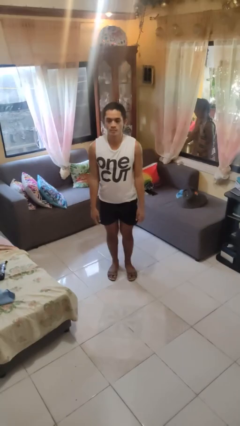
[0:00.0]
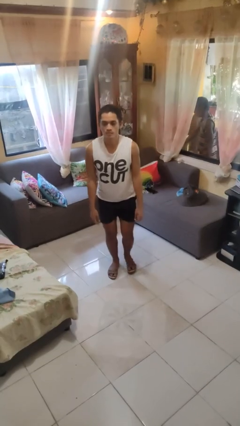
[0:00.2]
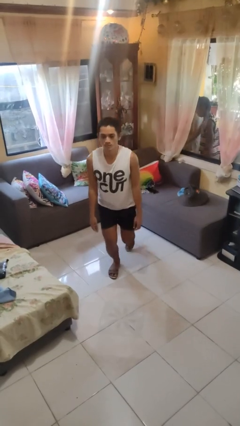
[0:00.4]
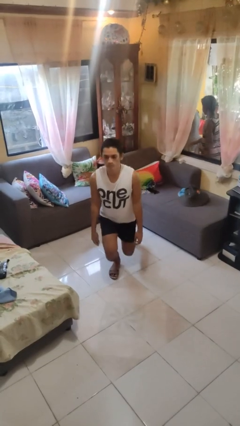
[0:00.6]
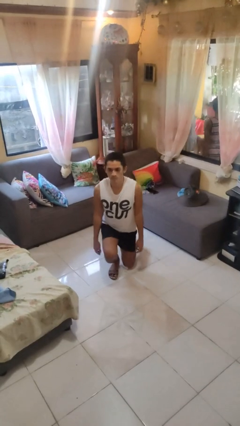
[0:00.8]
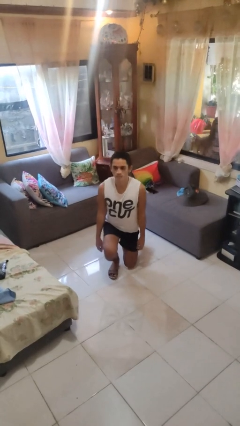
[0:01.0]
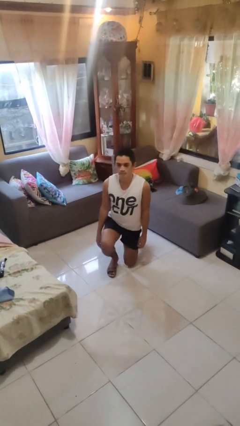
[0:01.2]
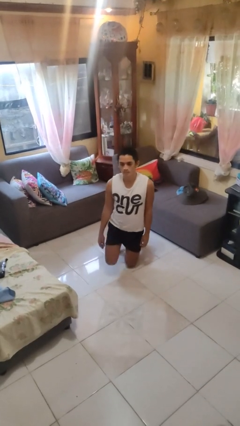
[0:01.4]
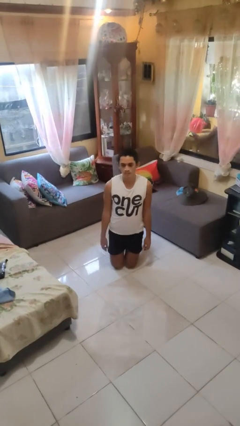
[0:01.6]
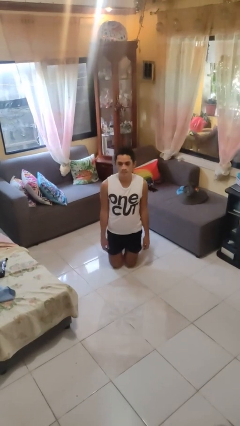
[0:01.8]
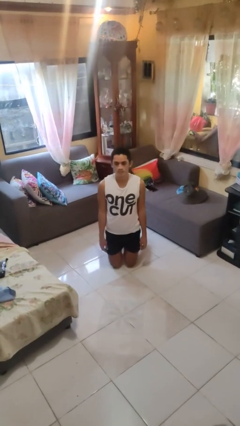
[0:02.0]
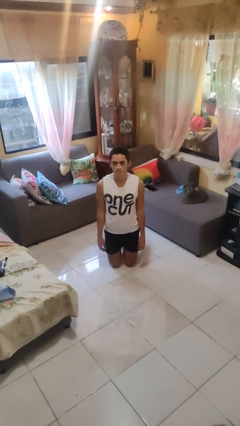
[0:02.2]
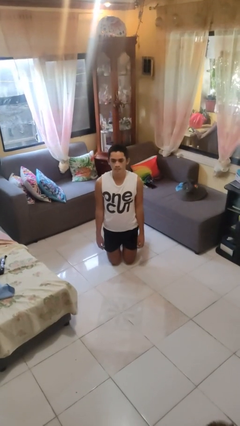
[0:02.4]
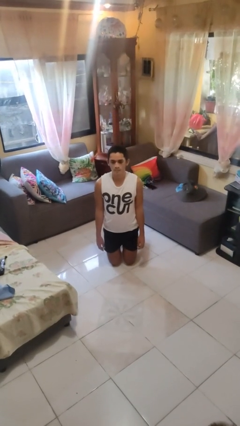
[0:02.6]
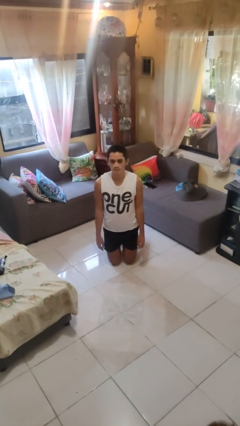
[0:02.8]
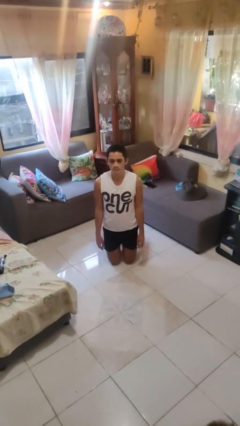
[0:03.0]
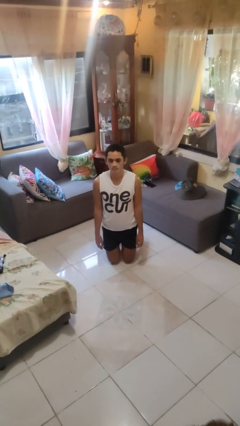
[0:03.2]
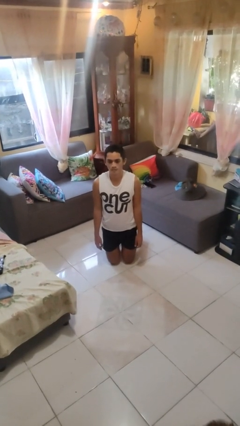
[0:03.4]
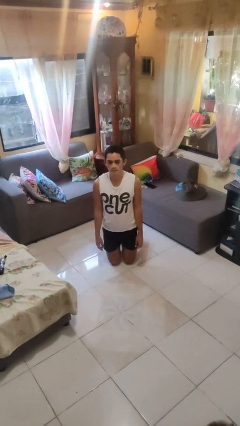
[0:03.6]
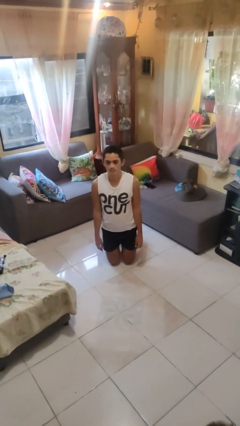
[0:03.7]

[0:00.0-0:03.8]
person kneels

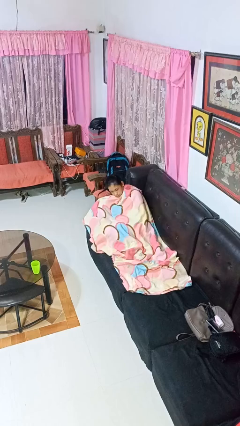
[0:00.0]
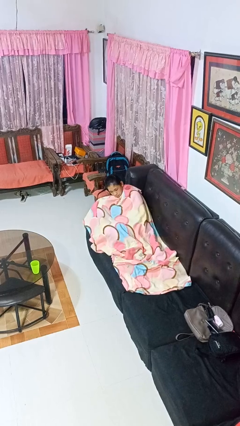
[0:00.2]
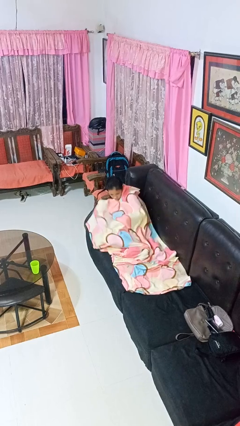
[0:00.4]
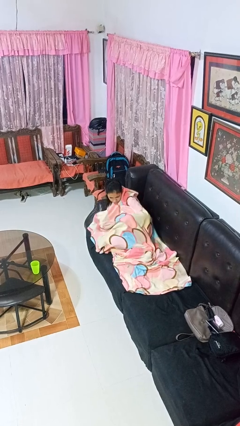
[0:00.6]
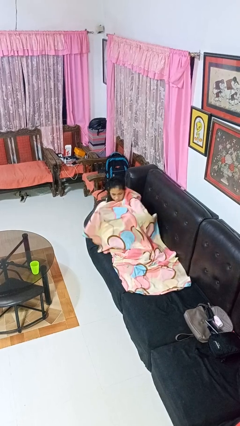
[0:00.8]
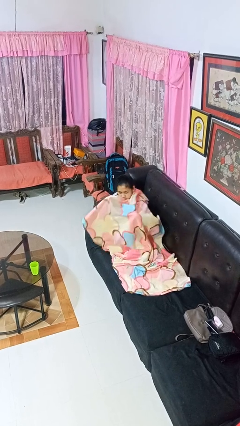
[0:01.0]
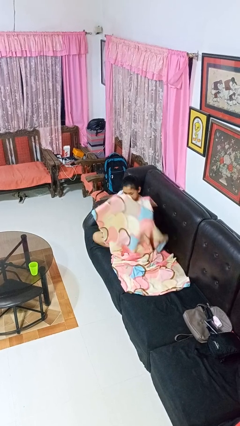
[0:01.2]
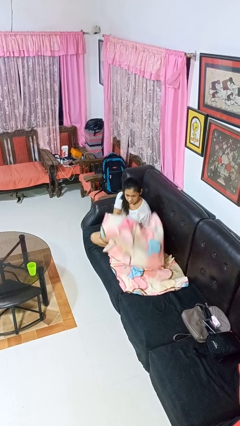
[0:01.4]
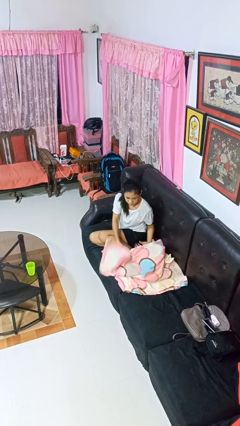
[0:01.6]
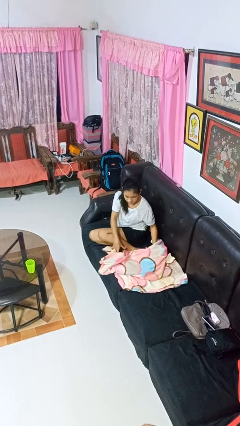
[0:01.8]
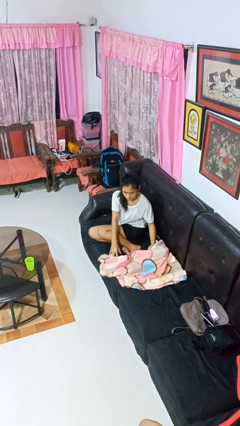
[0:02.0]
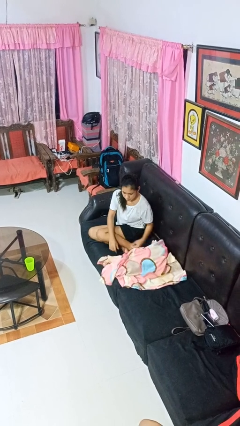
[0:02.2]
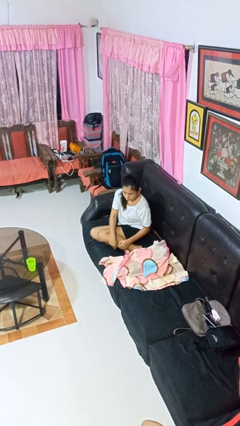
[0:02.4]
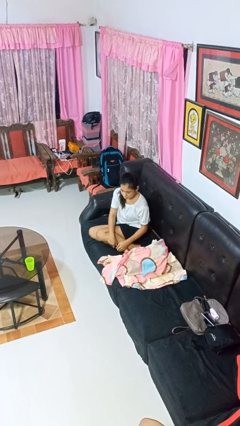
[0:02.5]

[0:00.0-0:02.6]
person uncovers with blanket

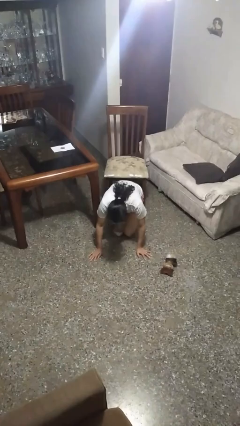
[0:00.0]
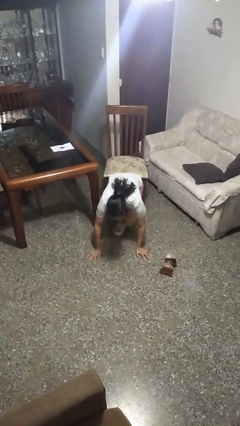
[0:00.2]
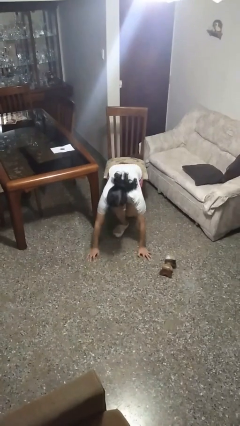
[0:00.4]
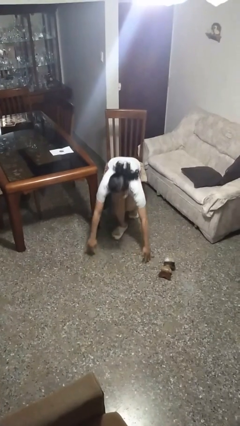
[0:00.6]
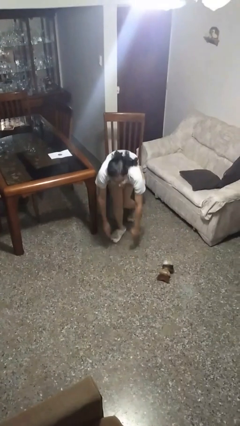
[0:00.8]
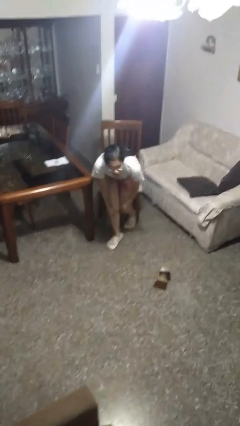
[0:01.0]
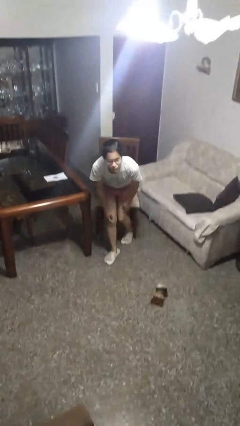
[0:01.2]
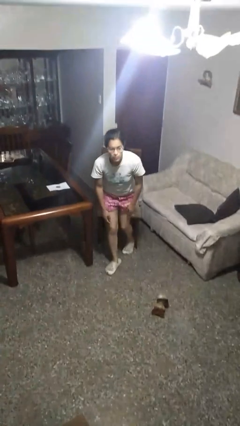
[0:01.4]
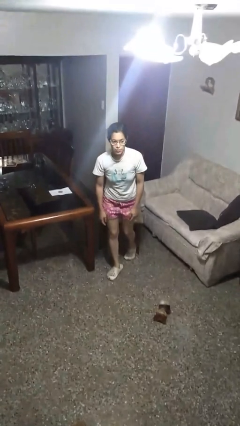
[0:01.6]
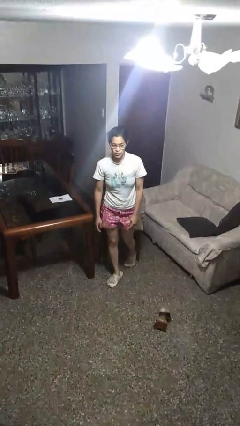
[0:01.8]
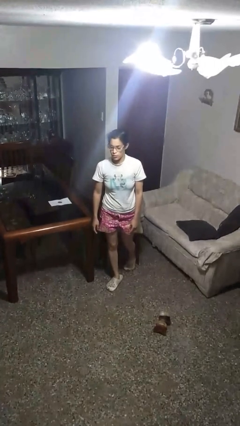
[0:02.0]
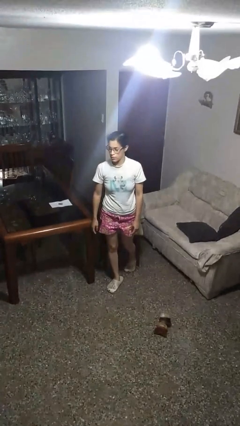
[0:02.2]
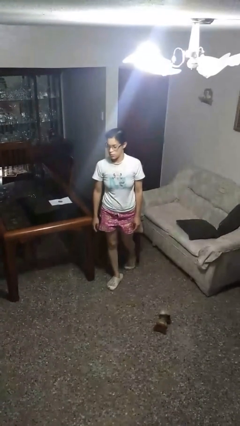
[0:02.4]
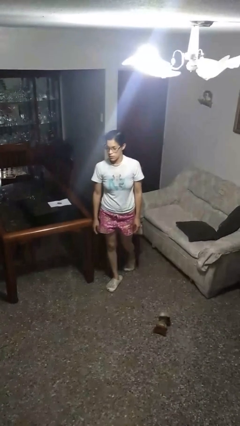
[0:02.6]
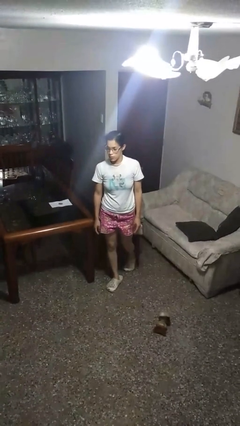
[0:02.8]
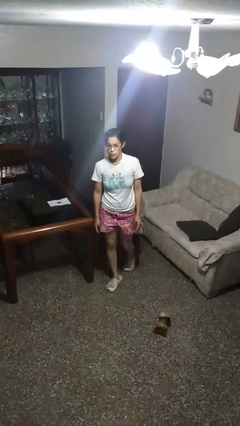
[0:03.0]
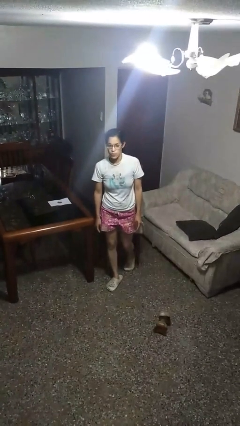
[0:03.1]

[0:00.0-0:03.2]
person stands up from floor

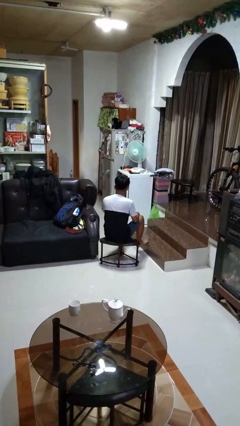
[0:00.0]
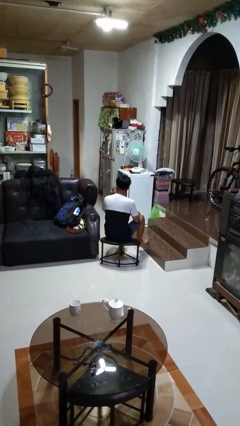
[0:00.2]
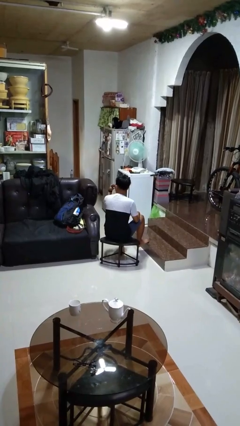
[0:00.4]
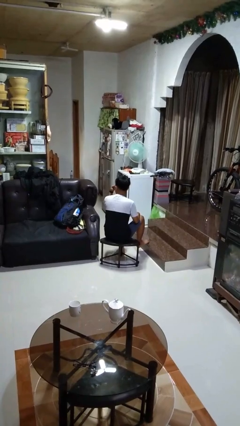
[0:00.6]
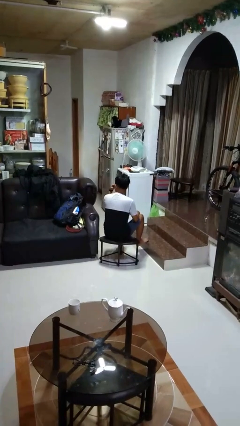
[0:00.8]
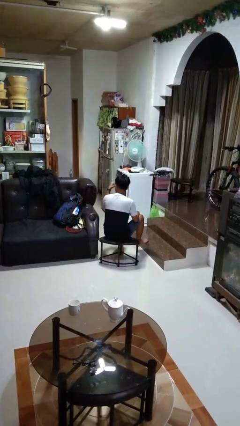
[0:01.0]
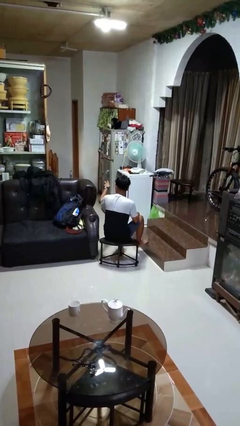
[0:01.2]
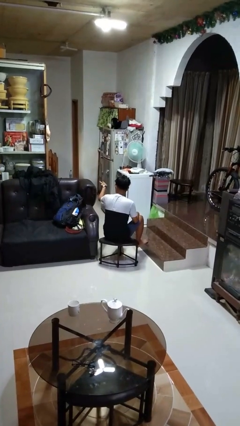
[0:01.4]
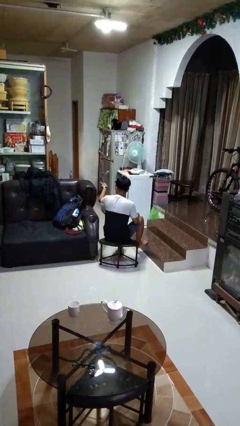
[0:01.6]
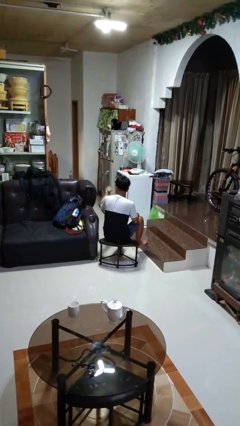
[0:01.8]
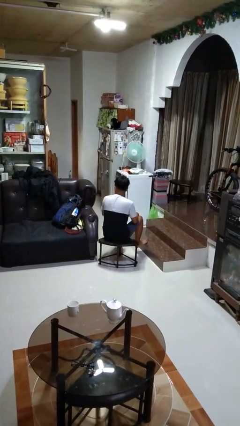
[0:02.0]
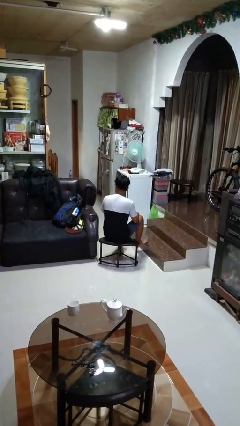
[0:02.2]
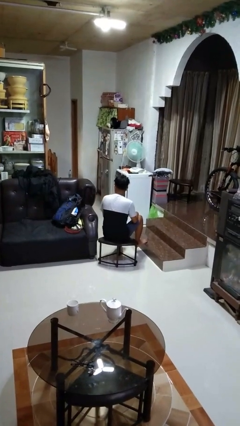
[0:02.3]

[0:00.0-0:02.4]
person gestures watch closely

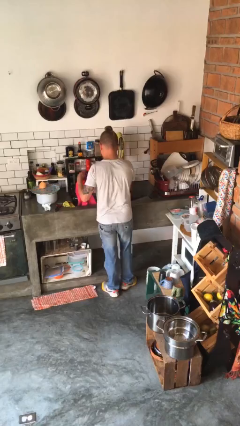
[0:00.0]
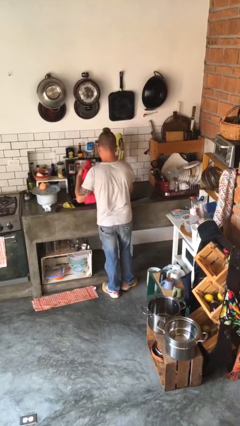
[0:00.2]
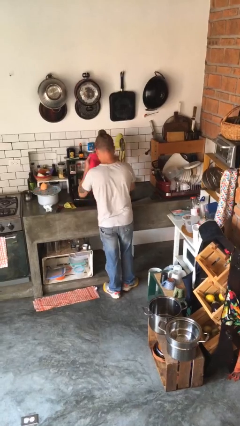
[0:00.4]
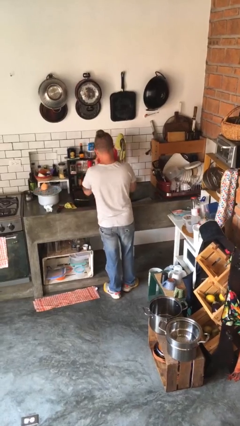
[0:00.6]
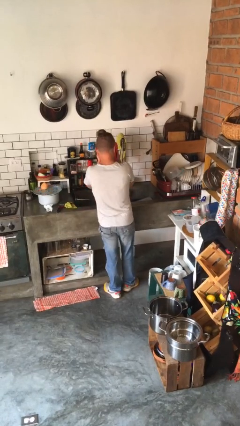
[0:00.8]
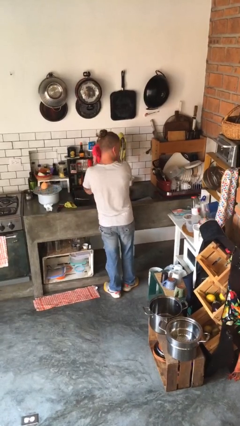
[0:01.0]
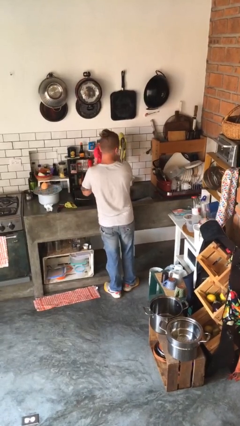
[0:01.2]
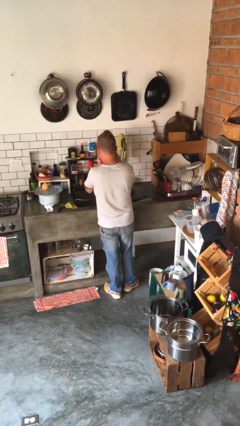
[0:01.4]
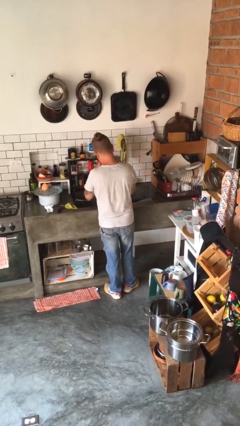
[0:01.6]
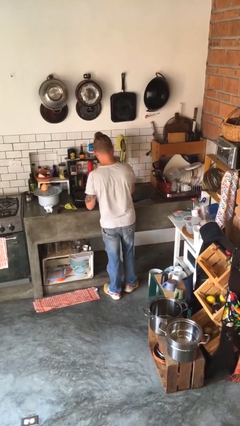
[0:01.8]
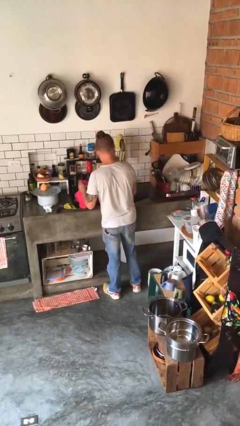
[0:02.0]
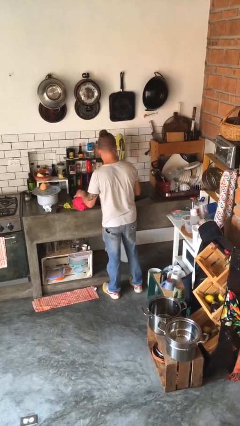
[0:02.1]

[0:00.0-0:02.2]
person dries face with towel

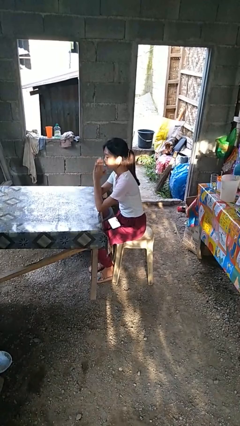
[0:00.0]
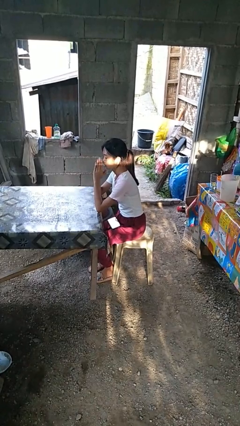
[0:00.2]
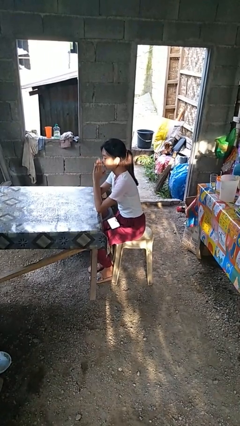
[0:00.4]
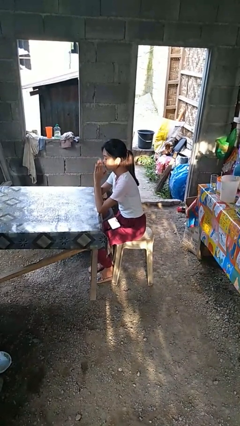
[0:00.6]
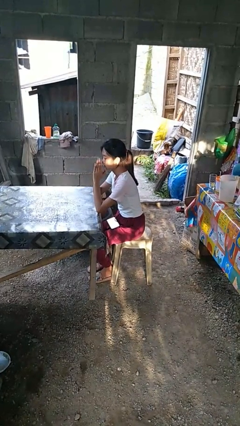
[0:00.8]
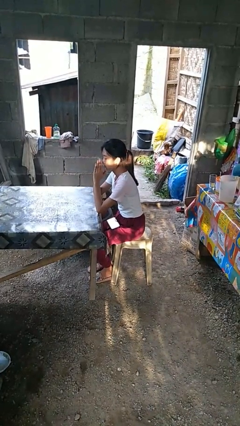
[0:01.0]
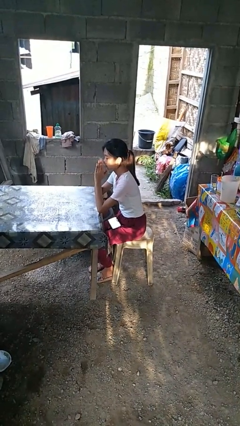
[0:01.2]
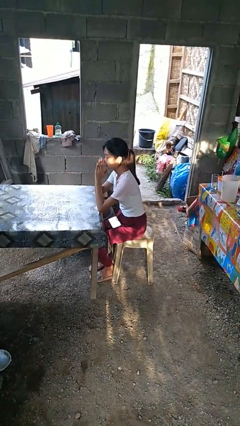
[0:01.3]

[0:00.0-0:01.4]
person prays

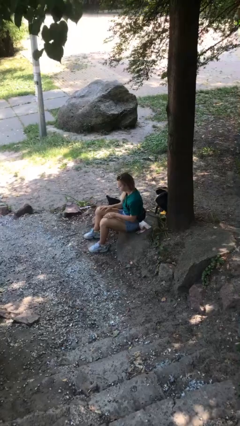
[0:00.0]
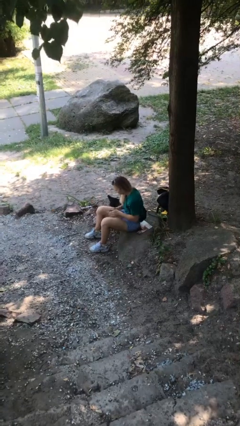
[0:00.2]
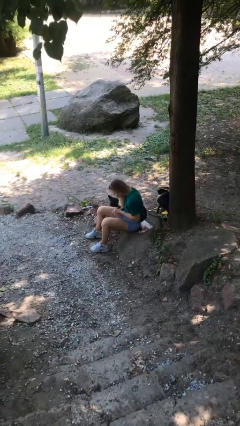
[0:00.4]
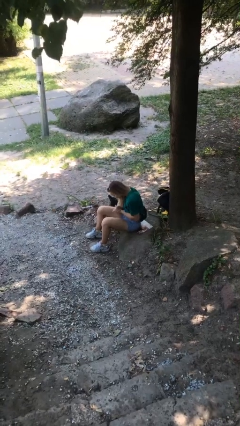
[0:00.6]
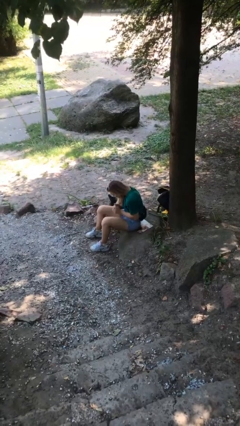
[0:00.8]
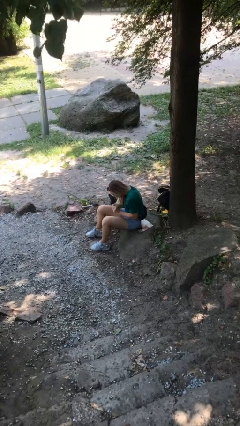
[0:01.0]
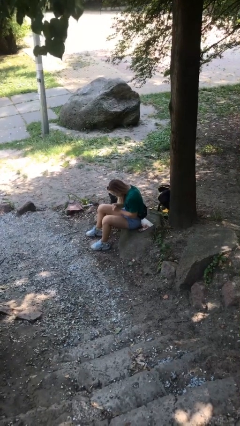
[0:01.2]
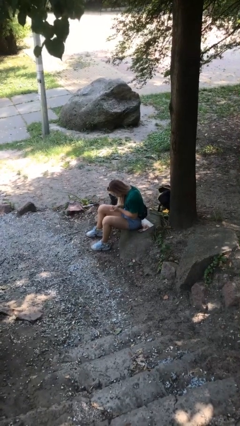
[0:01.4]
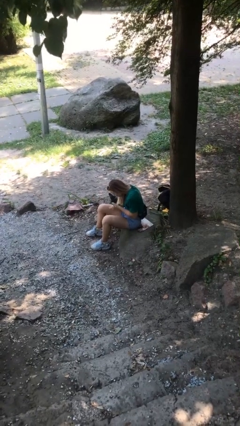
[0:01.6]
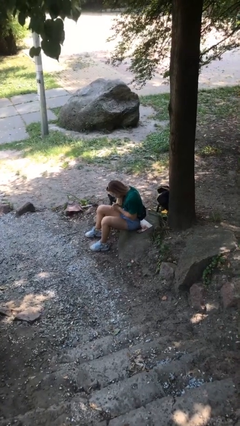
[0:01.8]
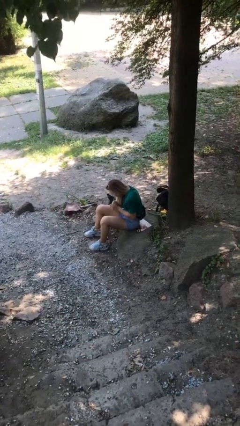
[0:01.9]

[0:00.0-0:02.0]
person looks at hands in lap
